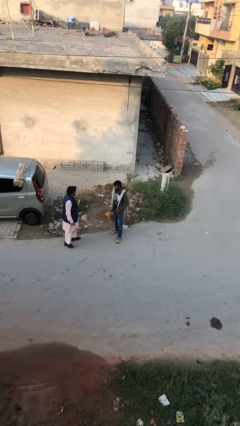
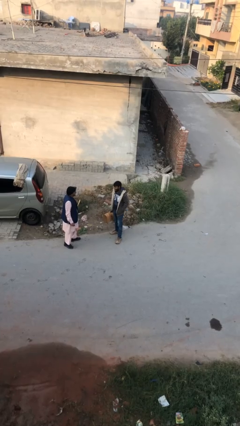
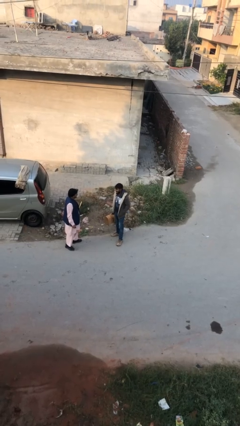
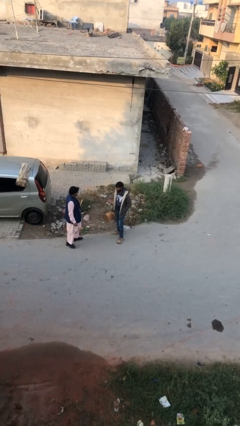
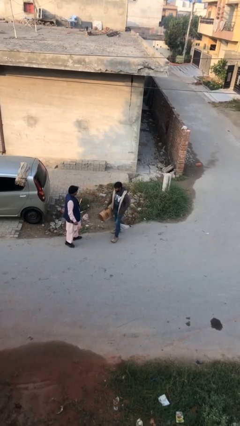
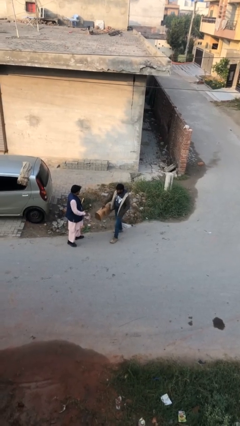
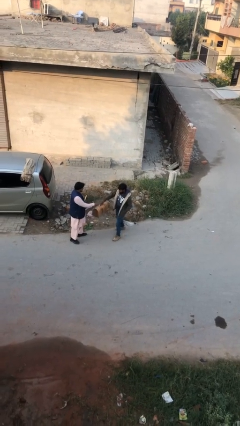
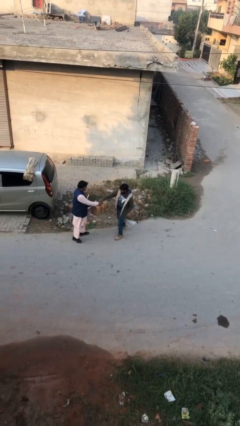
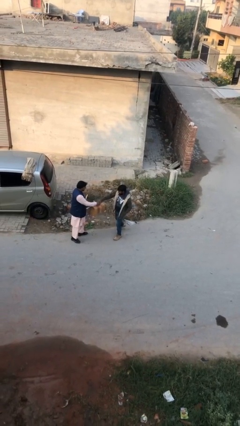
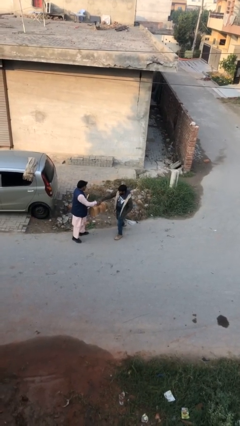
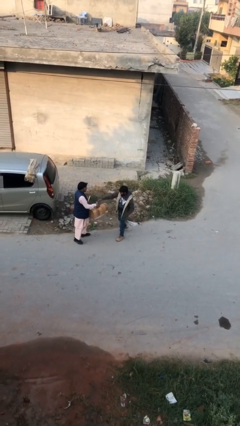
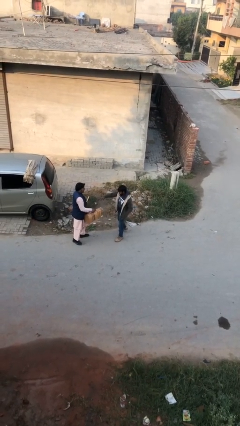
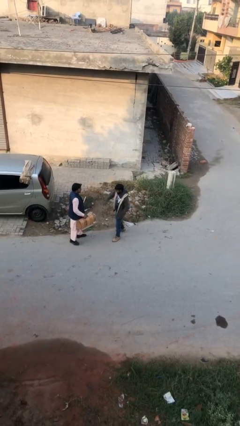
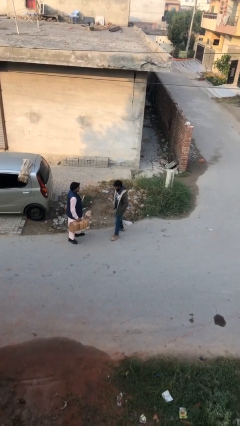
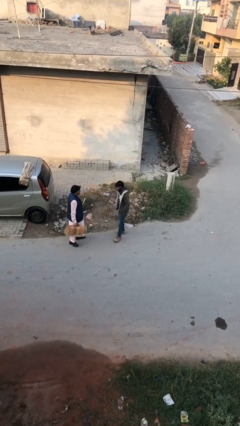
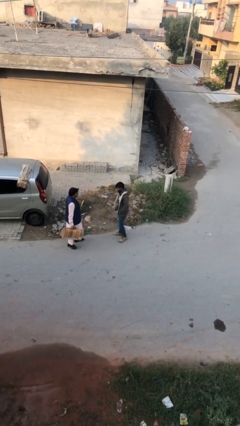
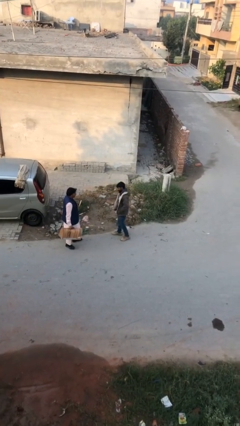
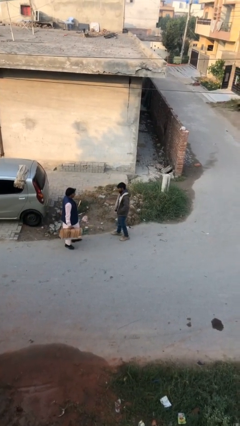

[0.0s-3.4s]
person transfers object to person

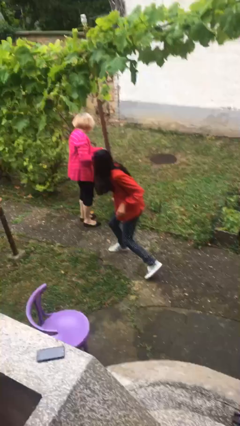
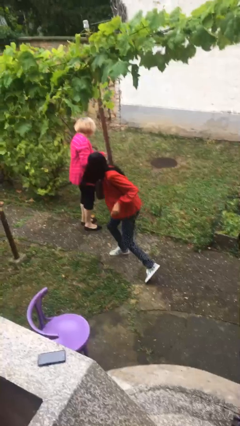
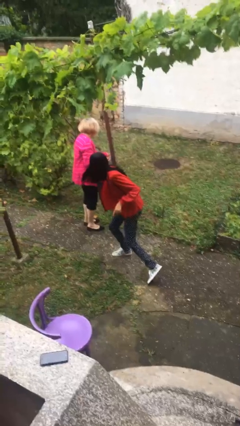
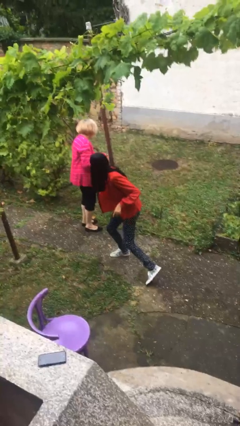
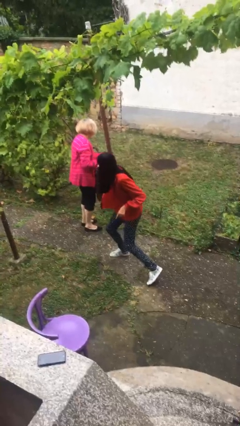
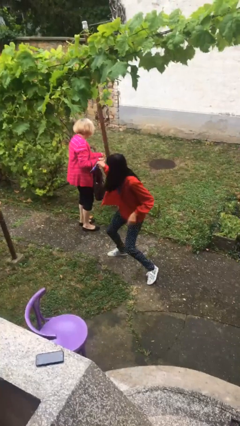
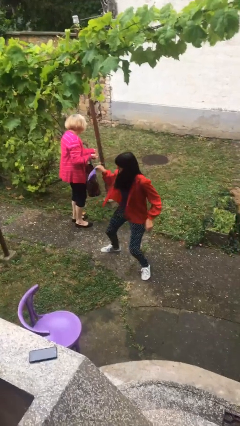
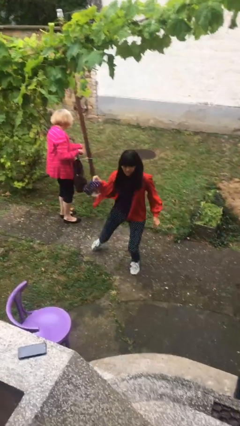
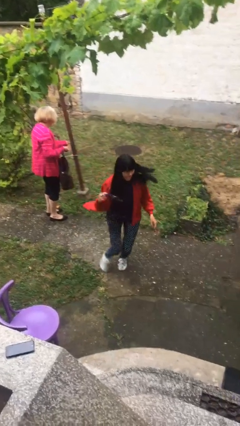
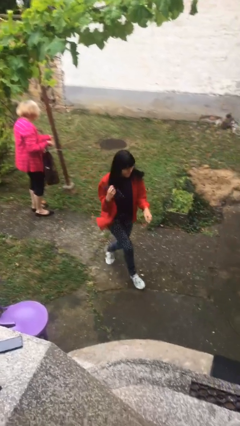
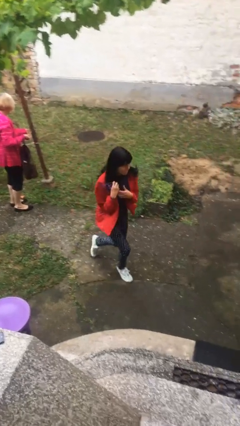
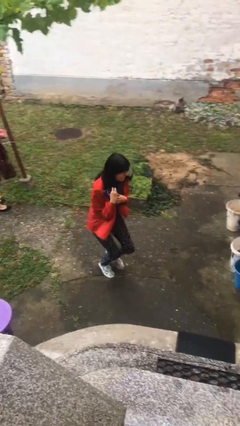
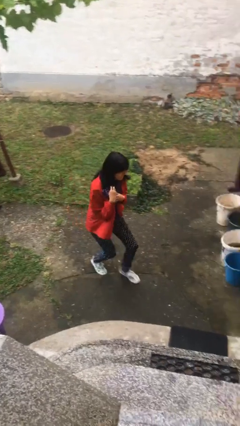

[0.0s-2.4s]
person steals object from person

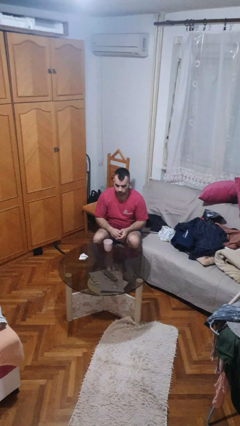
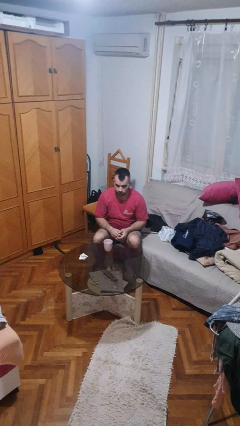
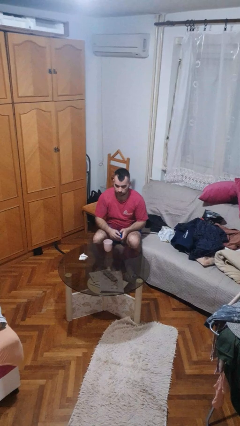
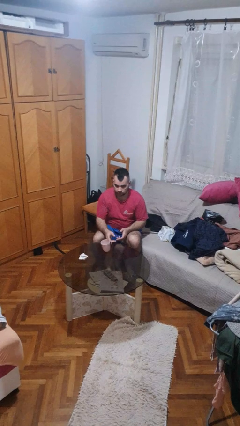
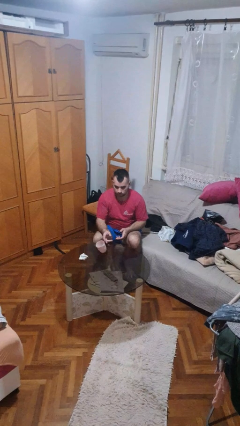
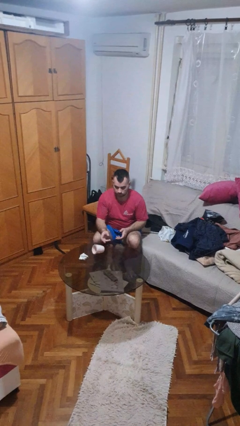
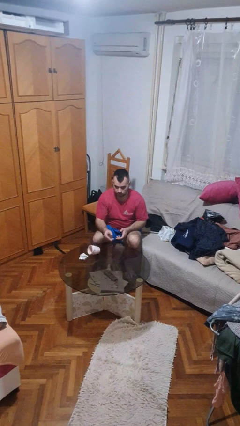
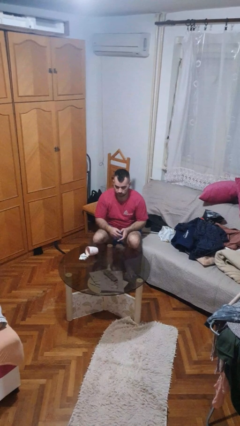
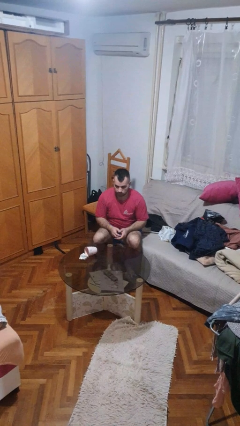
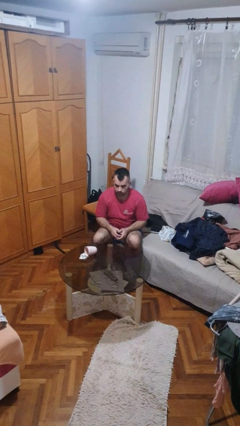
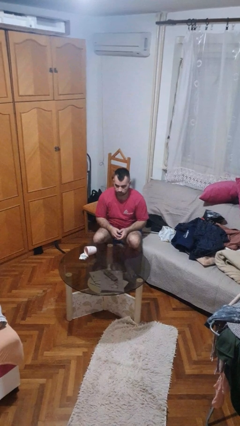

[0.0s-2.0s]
person knocks over glass

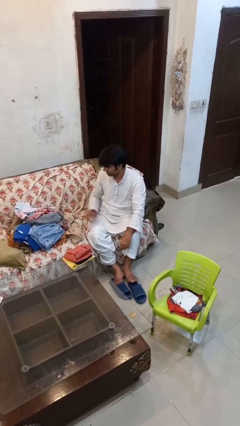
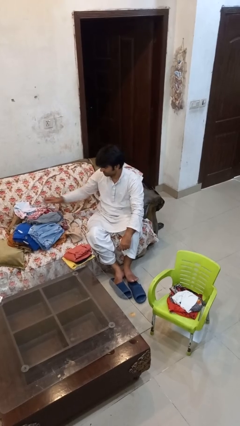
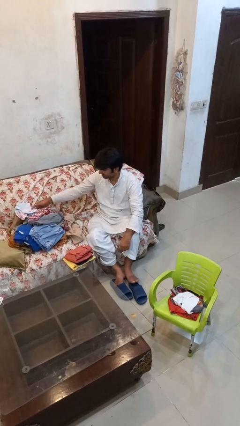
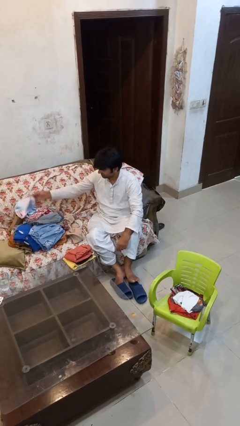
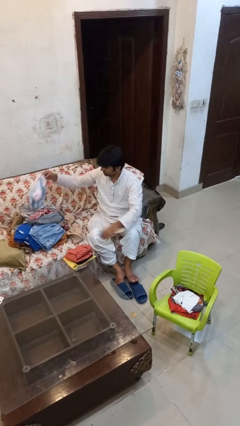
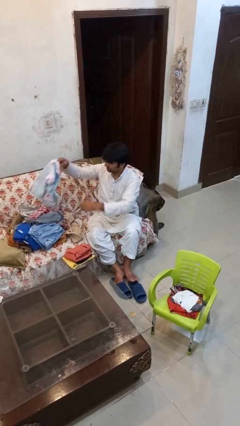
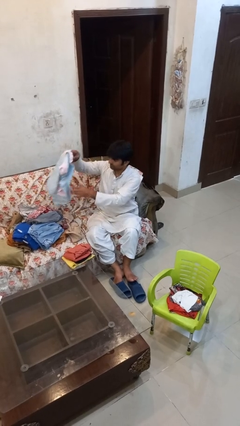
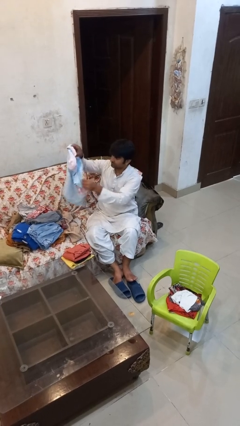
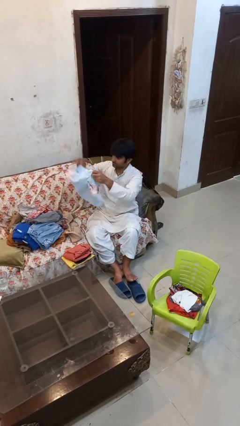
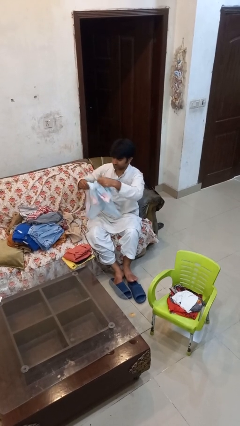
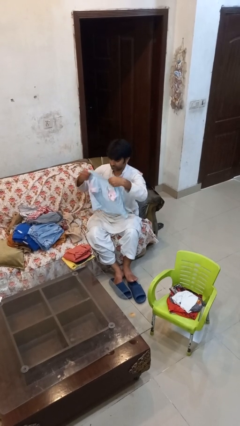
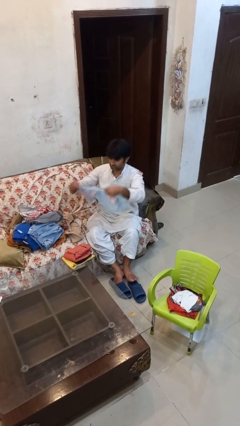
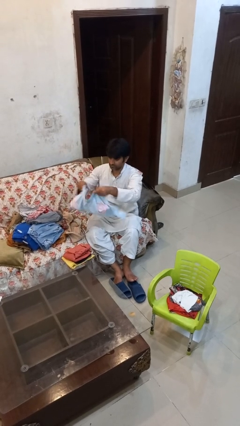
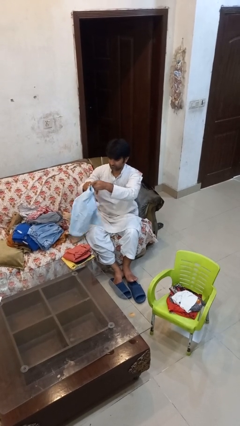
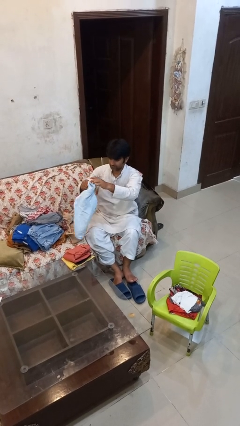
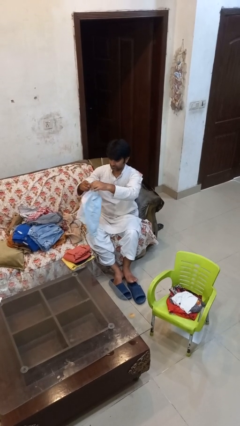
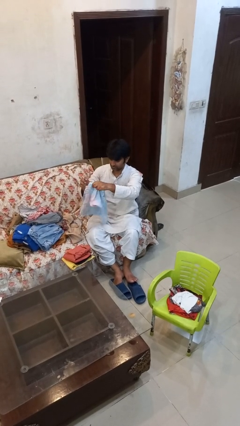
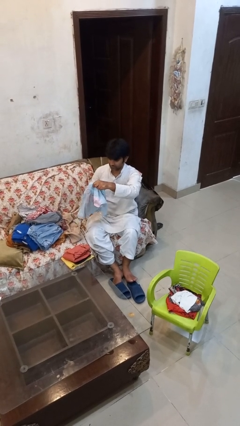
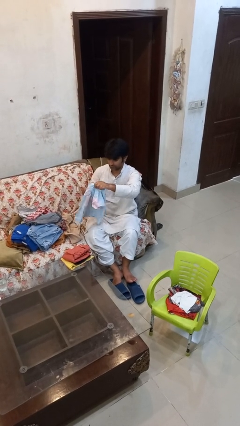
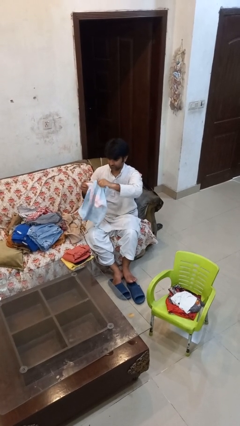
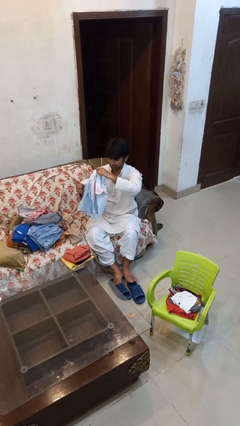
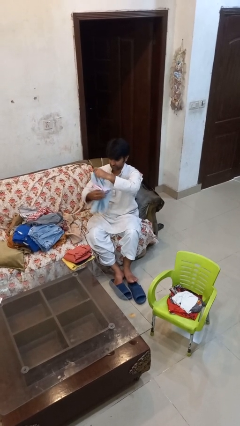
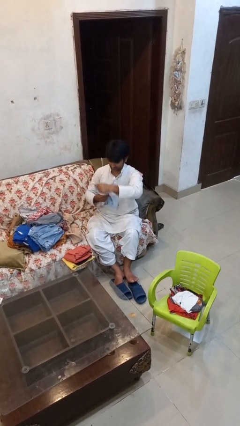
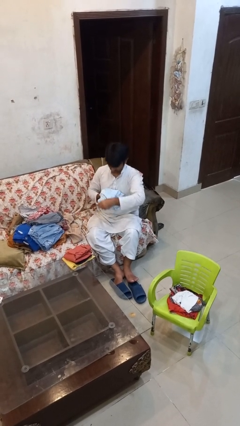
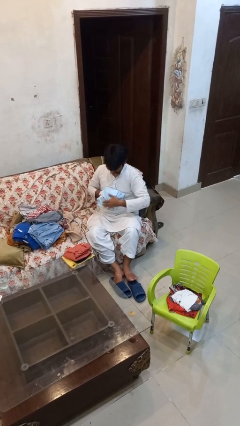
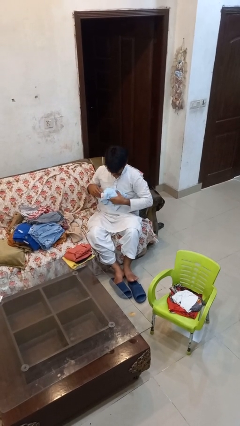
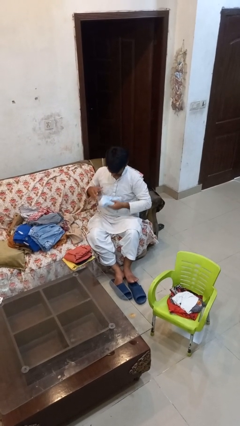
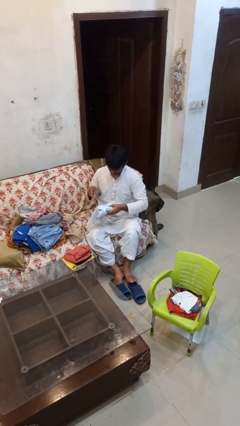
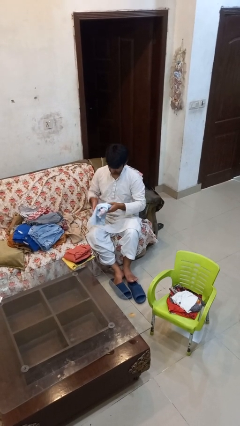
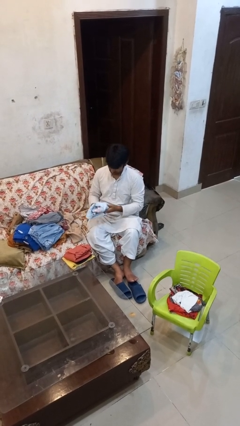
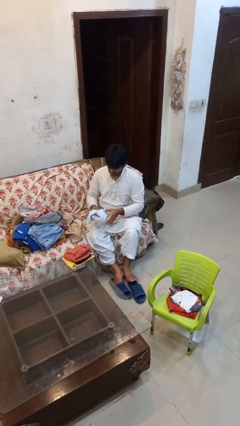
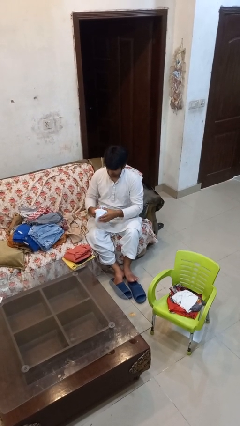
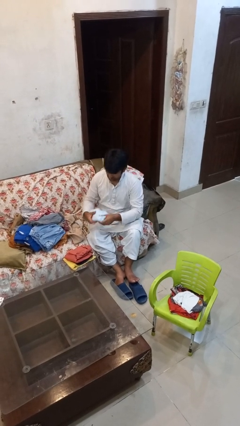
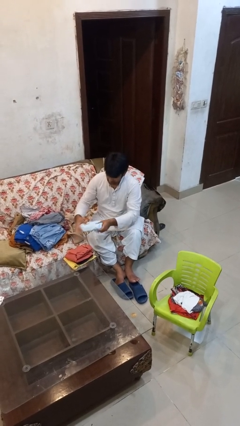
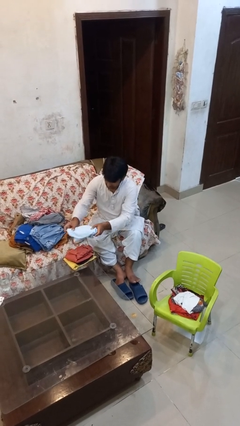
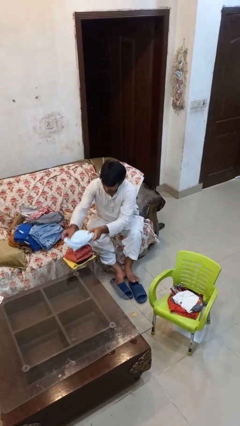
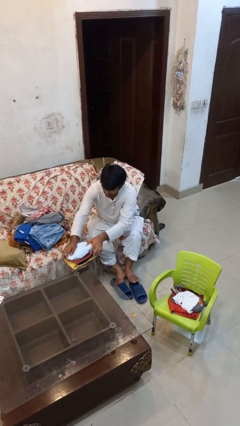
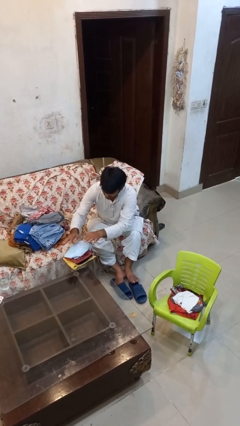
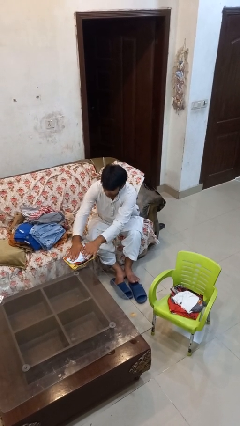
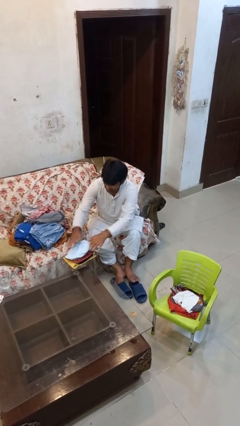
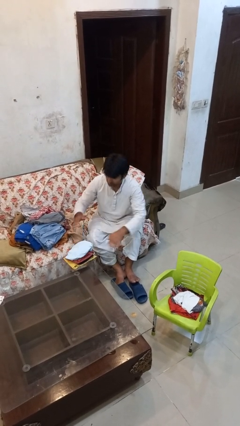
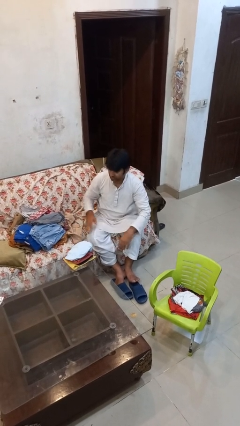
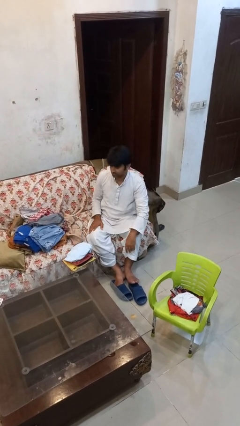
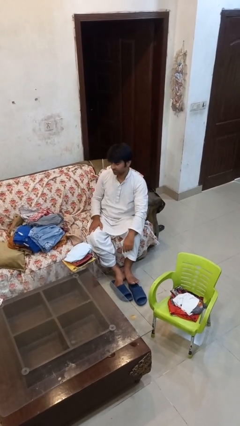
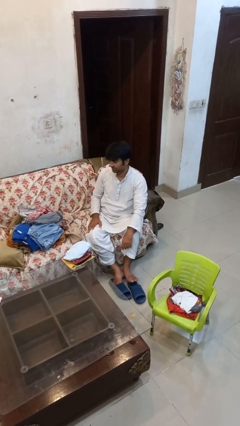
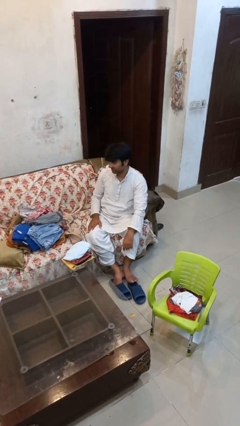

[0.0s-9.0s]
person folds shirt

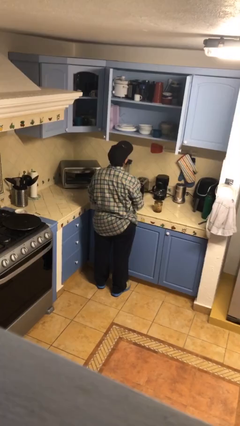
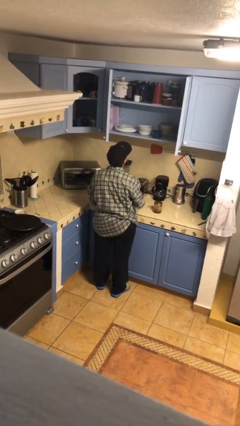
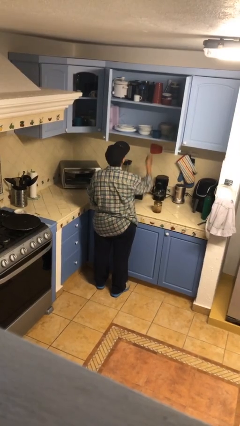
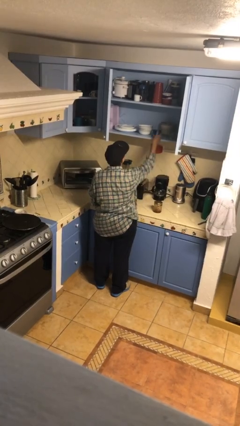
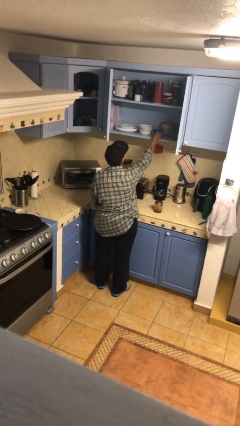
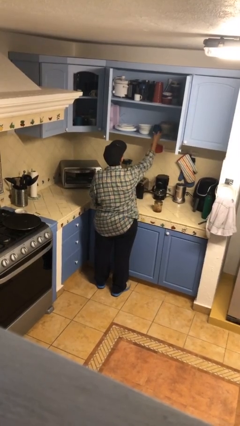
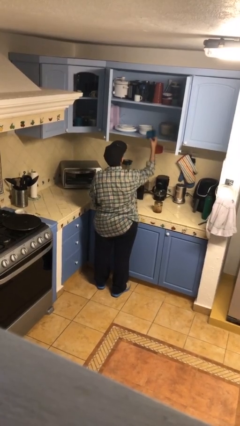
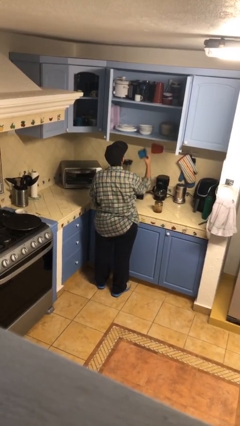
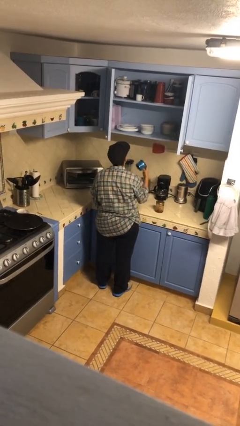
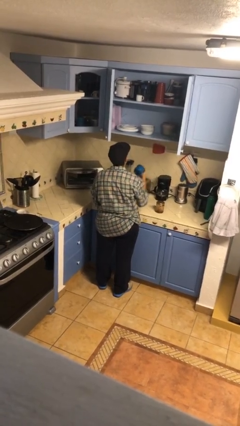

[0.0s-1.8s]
person picks up object from cabinet
